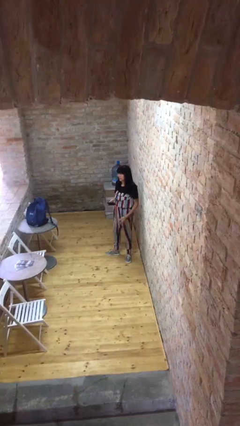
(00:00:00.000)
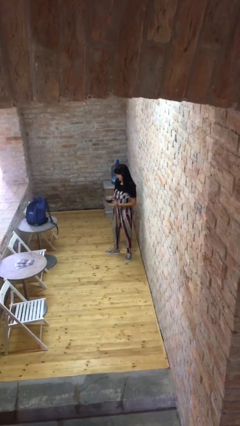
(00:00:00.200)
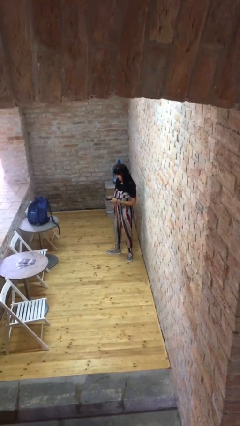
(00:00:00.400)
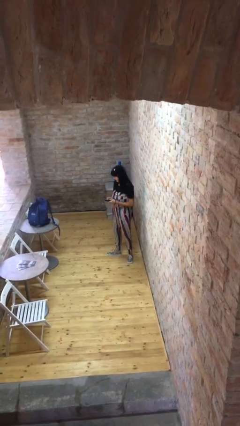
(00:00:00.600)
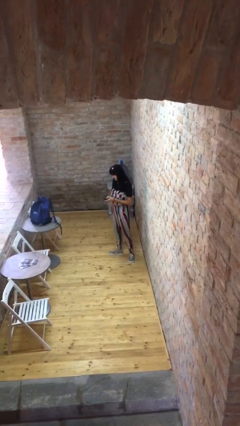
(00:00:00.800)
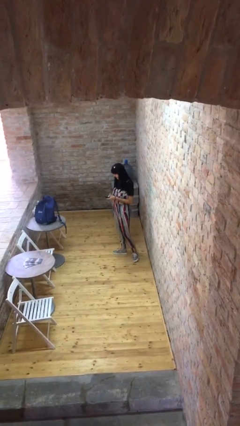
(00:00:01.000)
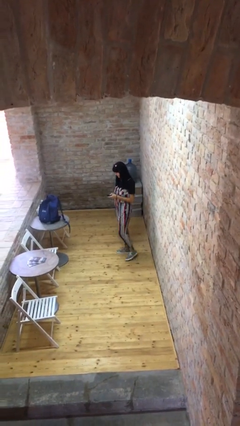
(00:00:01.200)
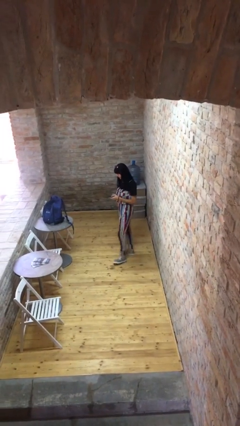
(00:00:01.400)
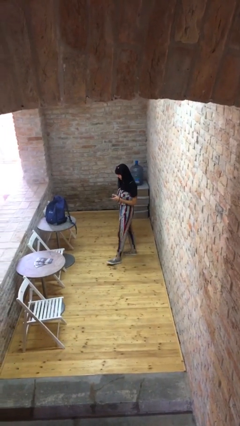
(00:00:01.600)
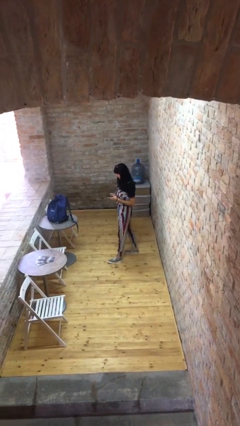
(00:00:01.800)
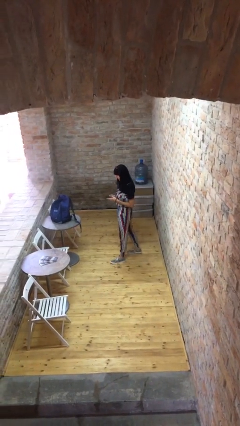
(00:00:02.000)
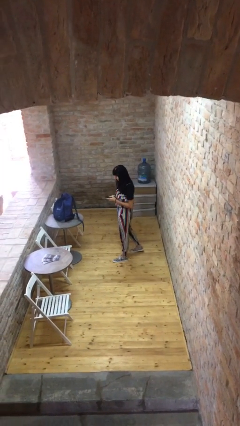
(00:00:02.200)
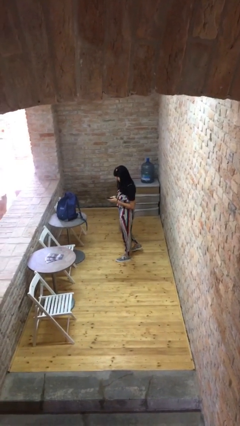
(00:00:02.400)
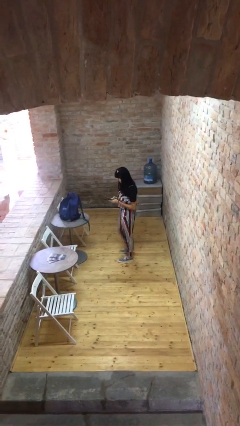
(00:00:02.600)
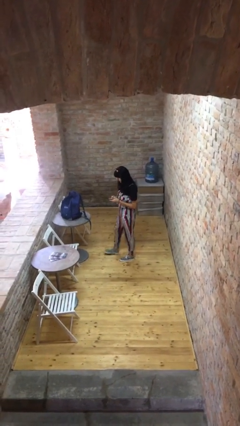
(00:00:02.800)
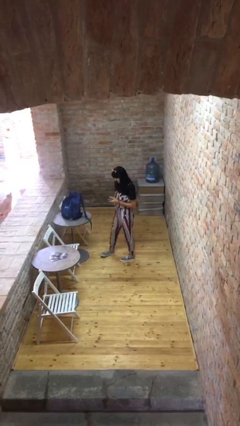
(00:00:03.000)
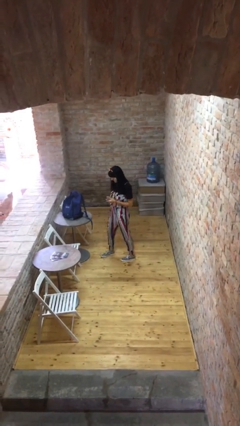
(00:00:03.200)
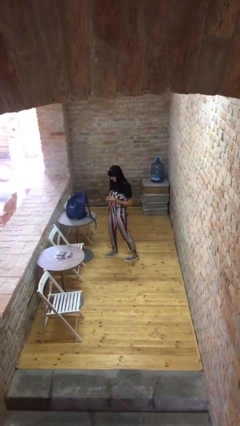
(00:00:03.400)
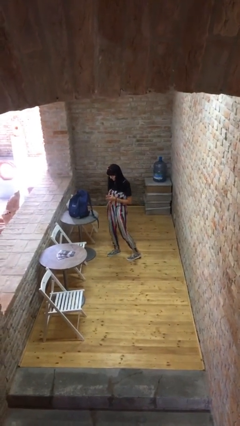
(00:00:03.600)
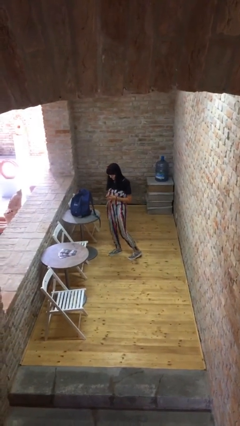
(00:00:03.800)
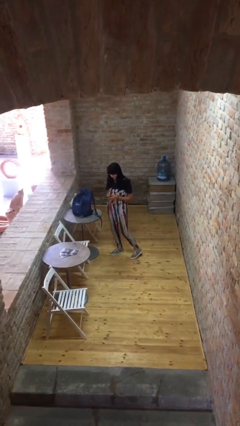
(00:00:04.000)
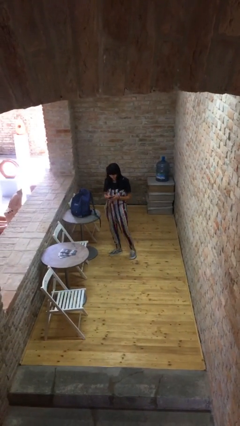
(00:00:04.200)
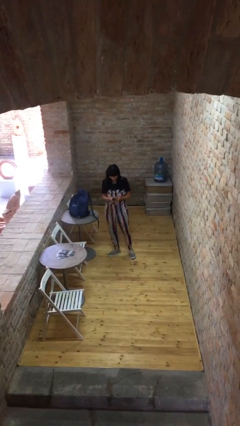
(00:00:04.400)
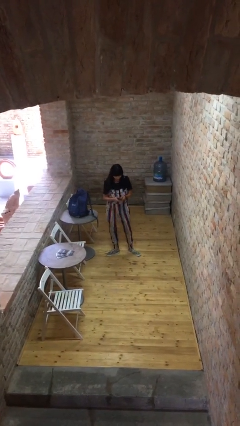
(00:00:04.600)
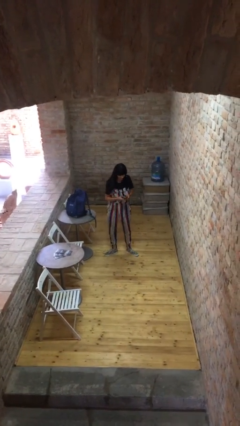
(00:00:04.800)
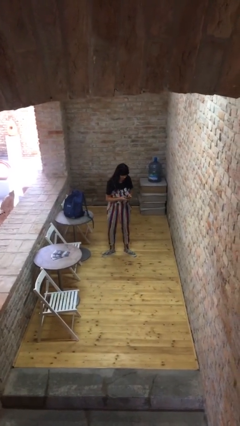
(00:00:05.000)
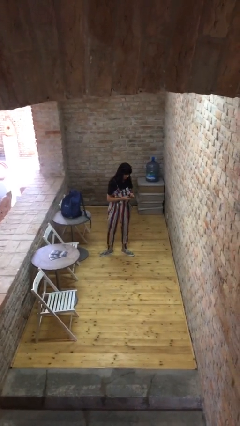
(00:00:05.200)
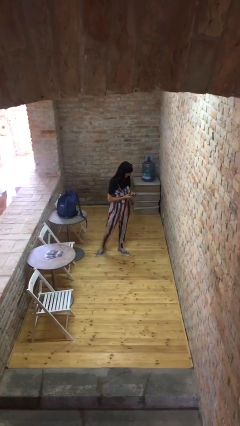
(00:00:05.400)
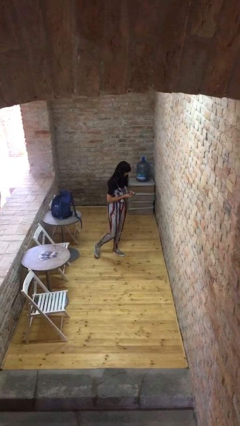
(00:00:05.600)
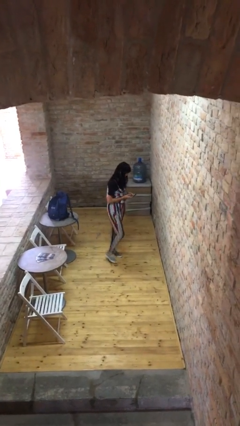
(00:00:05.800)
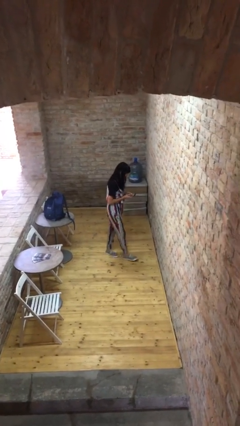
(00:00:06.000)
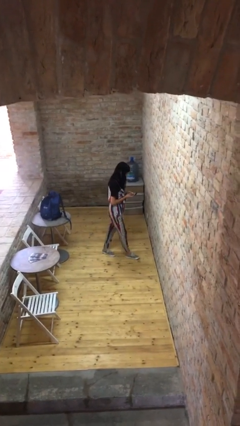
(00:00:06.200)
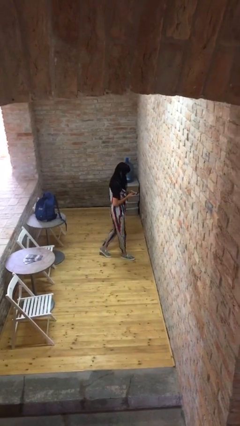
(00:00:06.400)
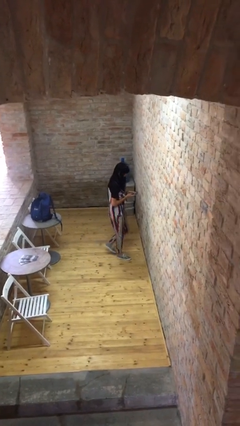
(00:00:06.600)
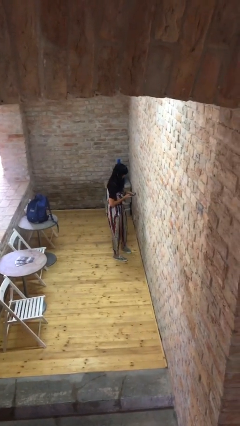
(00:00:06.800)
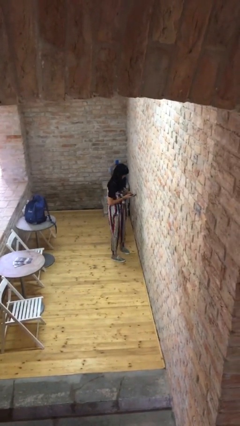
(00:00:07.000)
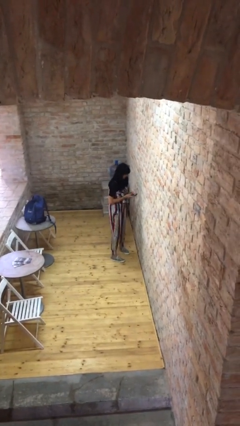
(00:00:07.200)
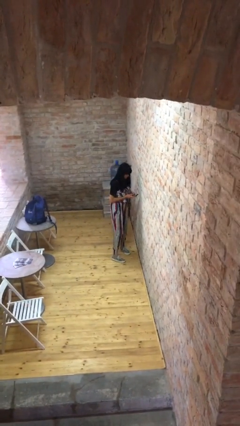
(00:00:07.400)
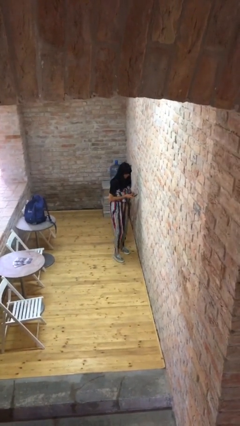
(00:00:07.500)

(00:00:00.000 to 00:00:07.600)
person texts on phone

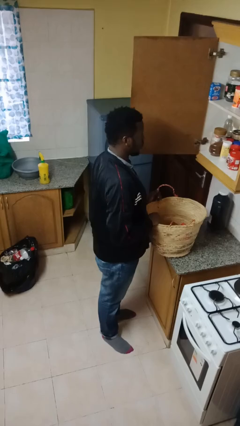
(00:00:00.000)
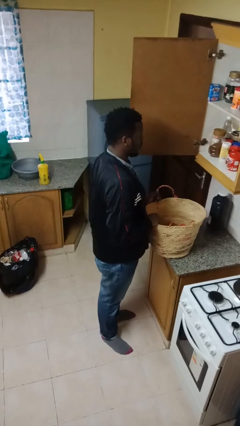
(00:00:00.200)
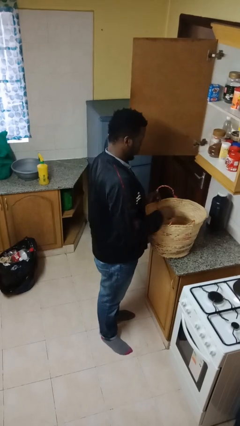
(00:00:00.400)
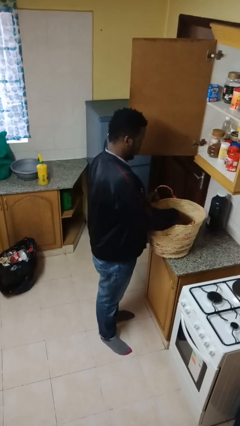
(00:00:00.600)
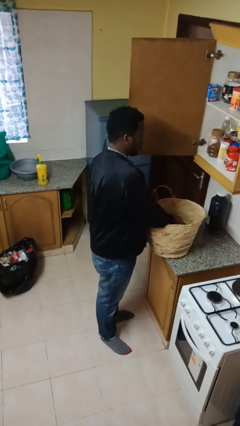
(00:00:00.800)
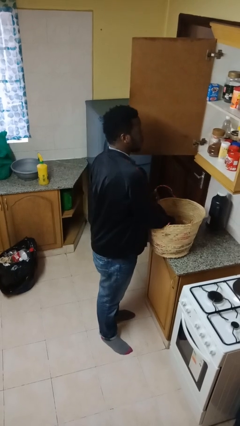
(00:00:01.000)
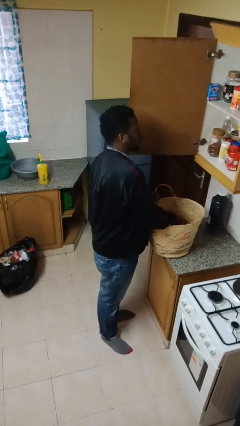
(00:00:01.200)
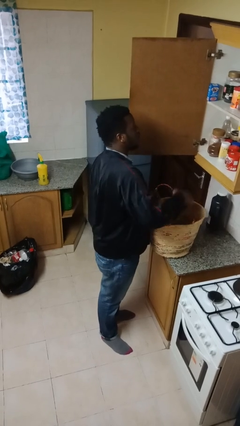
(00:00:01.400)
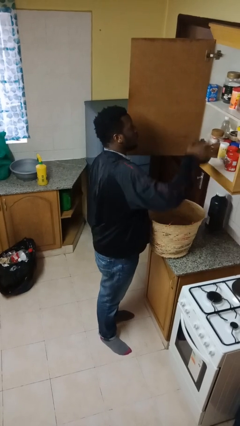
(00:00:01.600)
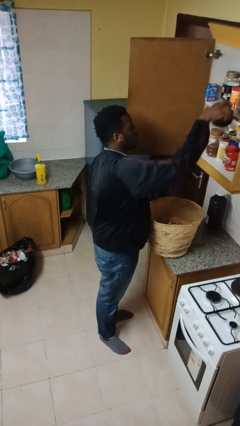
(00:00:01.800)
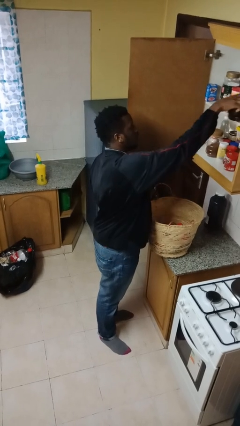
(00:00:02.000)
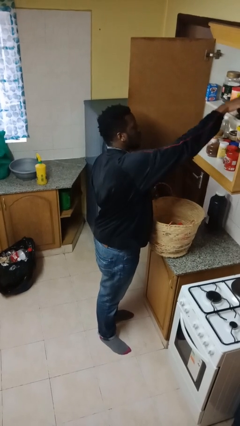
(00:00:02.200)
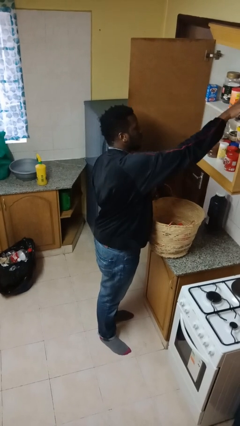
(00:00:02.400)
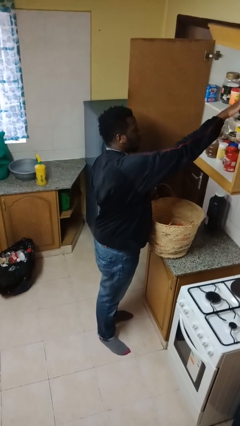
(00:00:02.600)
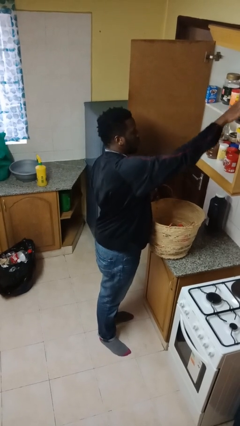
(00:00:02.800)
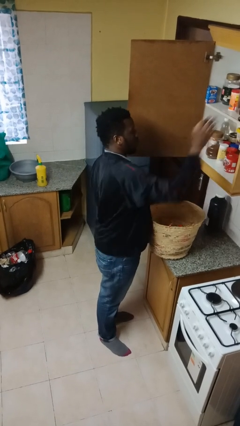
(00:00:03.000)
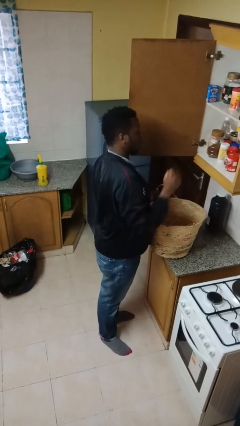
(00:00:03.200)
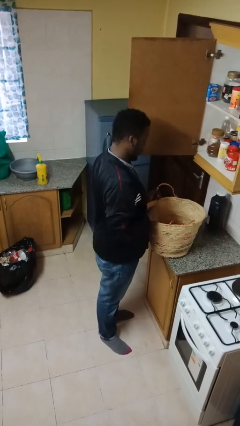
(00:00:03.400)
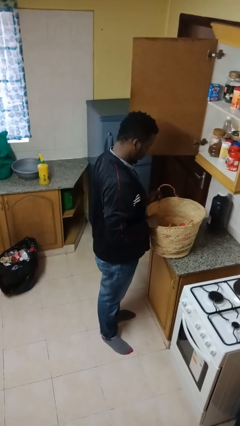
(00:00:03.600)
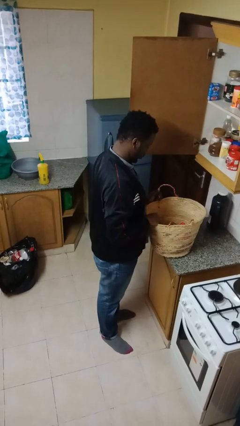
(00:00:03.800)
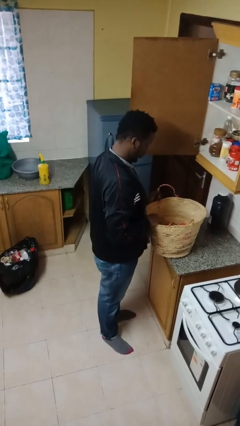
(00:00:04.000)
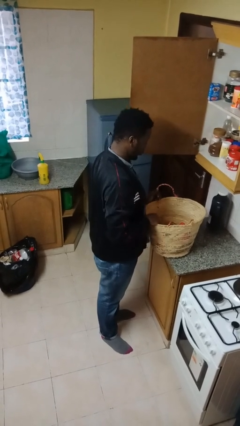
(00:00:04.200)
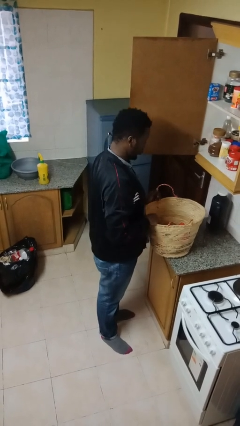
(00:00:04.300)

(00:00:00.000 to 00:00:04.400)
person loads groceries into cabinet

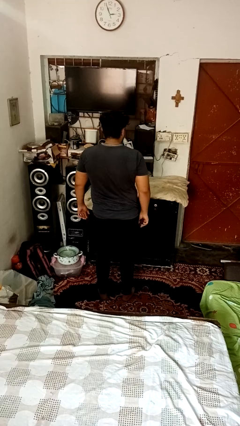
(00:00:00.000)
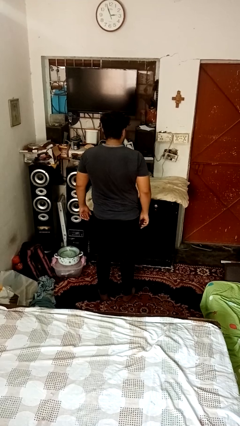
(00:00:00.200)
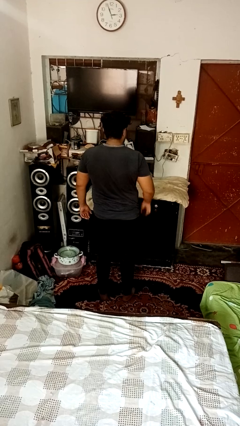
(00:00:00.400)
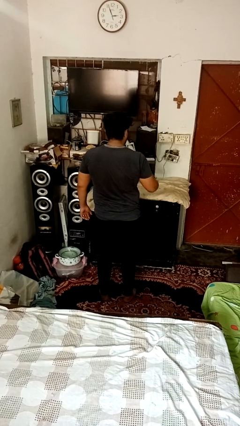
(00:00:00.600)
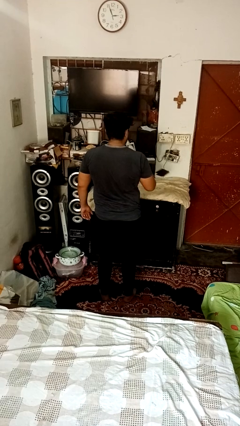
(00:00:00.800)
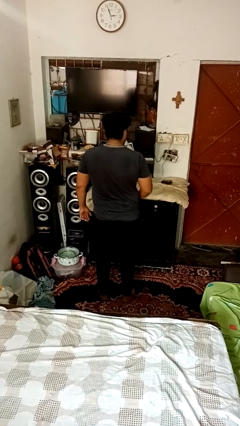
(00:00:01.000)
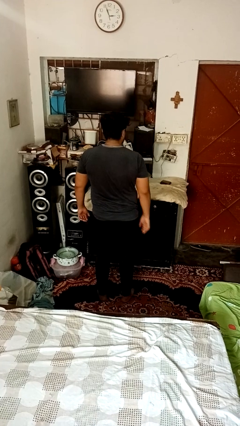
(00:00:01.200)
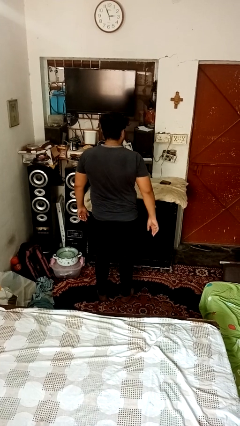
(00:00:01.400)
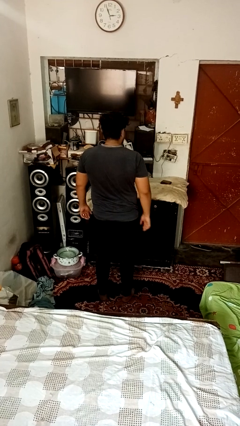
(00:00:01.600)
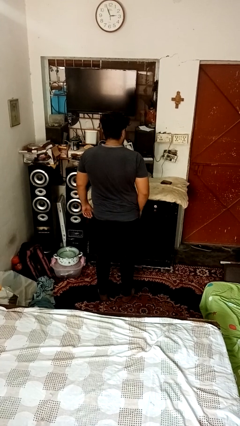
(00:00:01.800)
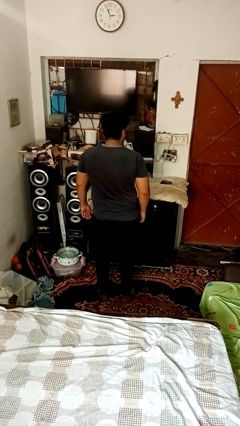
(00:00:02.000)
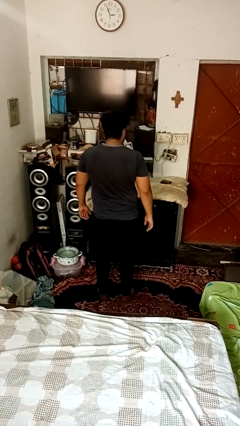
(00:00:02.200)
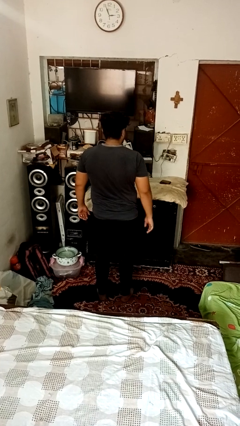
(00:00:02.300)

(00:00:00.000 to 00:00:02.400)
person throws object on table

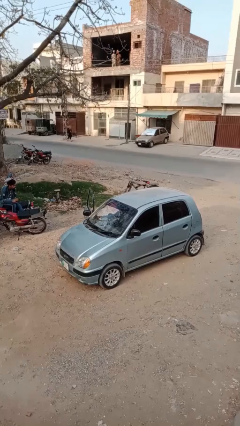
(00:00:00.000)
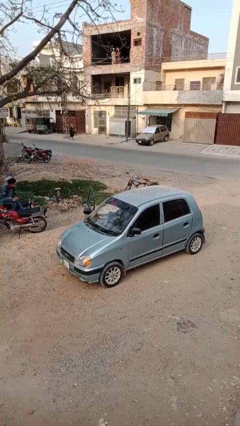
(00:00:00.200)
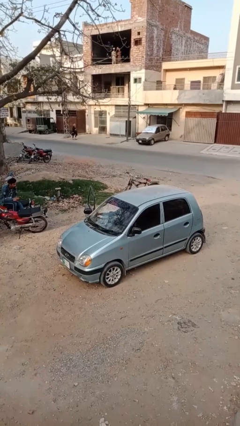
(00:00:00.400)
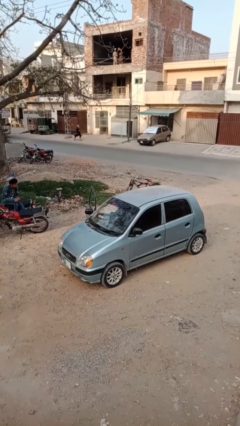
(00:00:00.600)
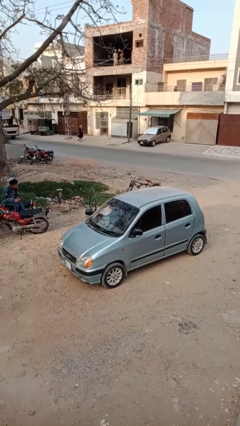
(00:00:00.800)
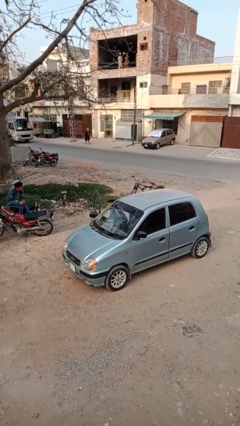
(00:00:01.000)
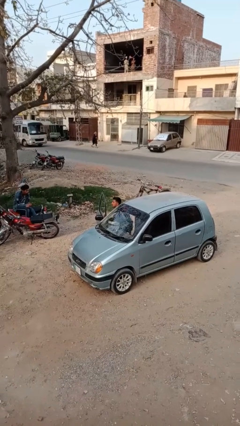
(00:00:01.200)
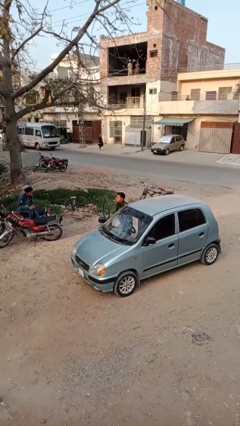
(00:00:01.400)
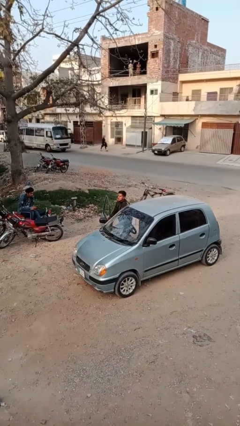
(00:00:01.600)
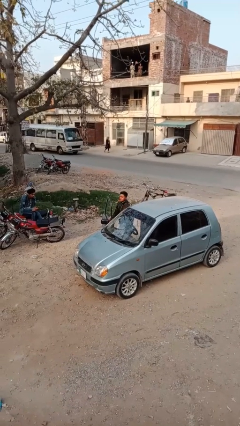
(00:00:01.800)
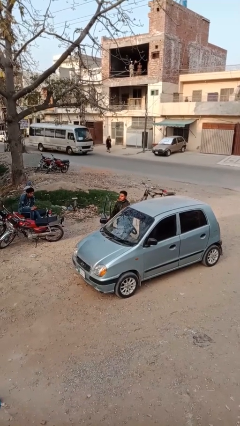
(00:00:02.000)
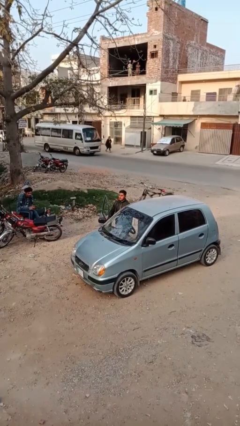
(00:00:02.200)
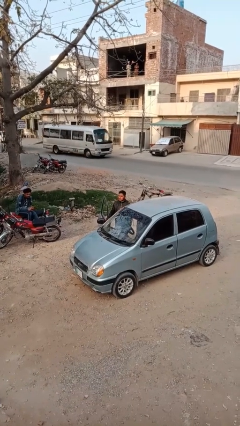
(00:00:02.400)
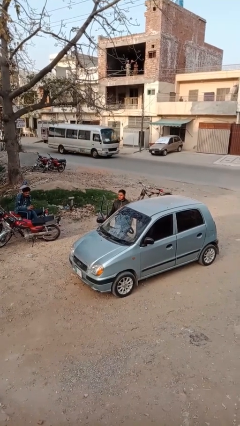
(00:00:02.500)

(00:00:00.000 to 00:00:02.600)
person exits car

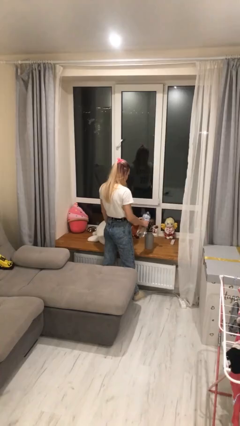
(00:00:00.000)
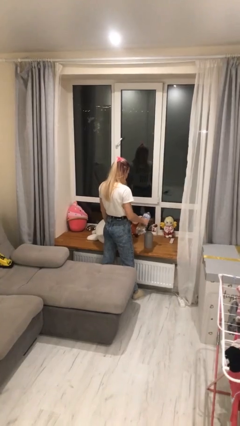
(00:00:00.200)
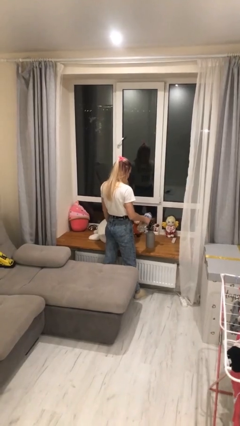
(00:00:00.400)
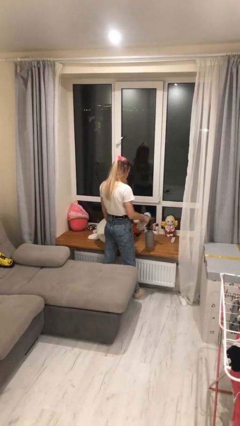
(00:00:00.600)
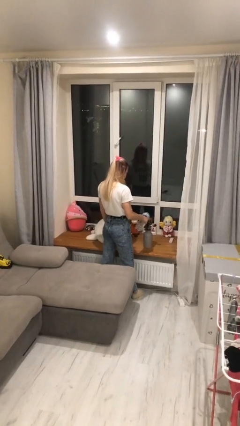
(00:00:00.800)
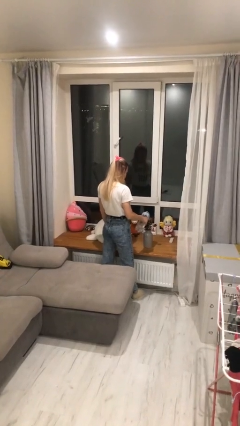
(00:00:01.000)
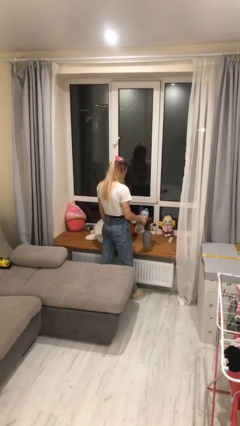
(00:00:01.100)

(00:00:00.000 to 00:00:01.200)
person waters houseplant
